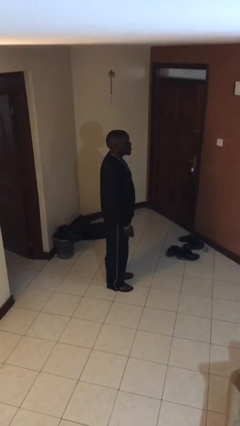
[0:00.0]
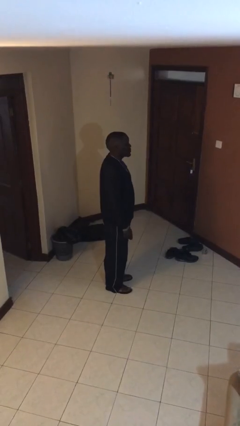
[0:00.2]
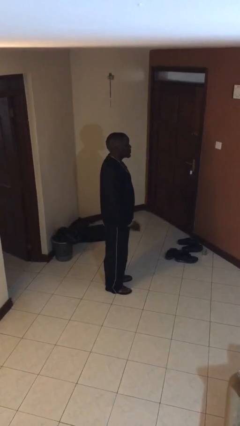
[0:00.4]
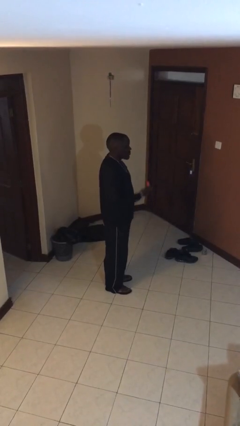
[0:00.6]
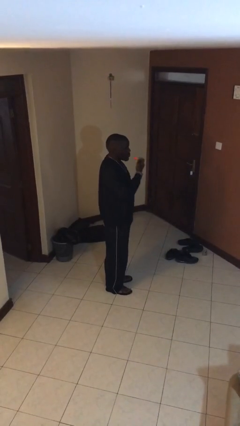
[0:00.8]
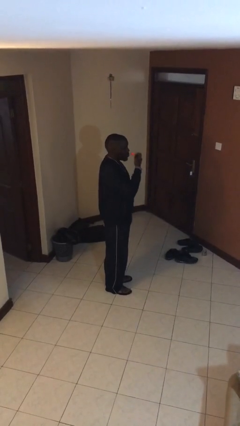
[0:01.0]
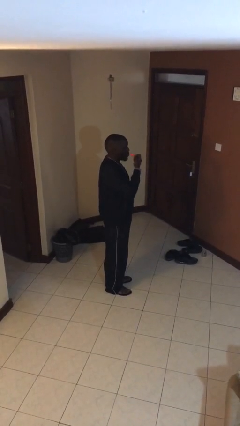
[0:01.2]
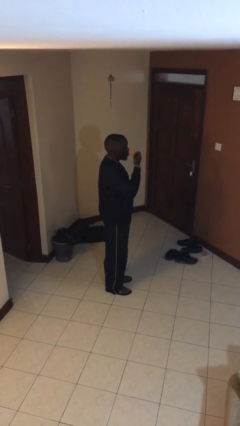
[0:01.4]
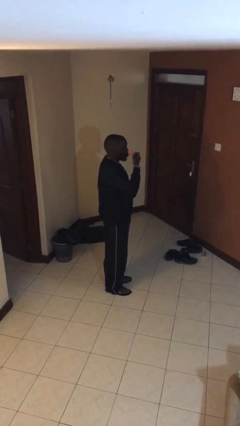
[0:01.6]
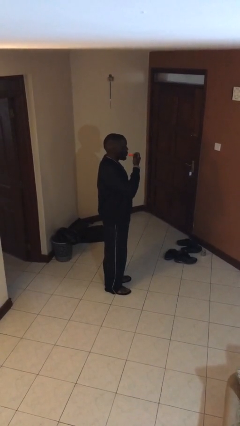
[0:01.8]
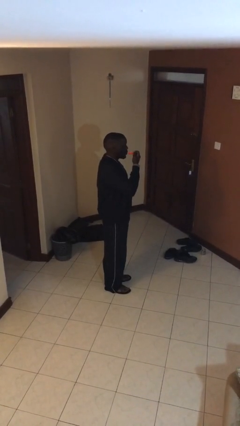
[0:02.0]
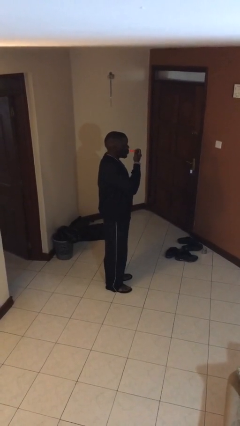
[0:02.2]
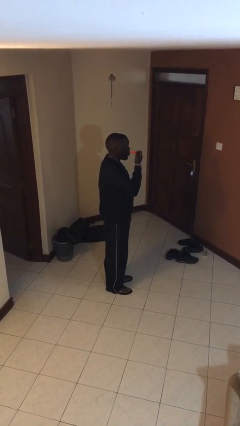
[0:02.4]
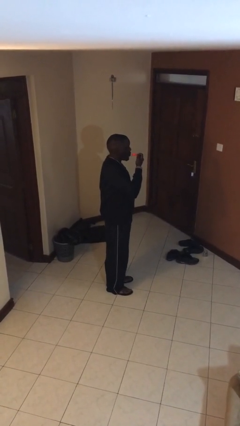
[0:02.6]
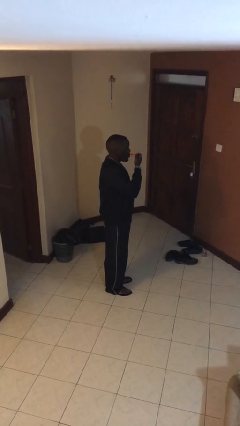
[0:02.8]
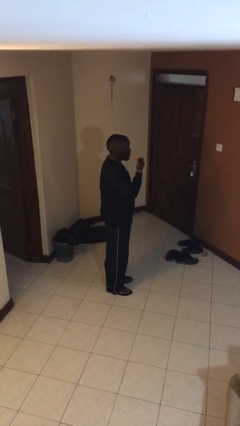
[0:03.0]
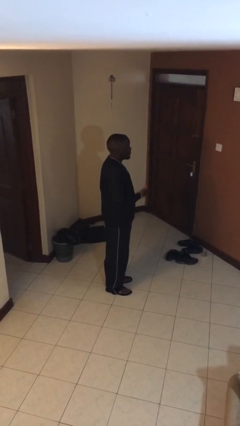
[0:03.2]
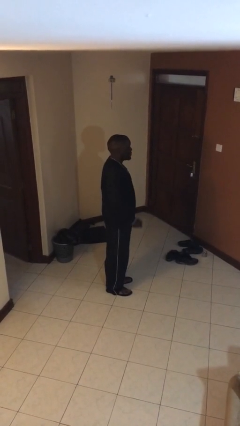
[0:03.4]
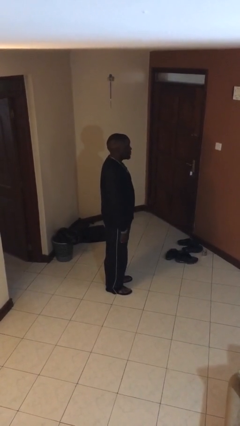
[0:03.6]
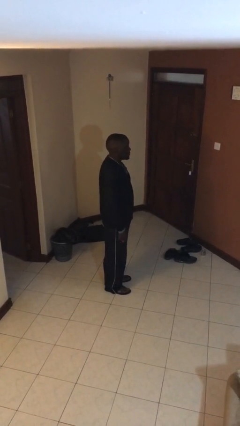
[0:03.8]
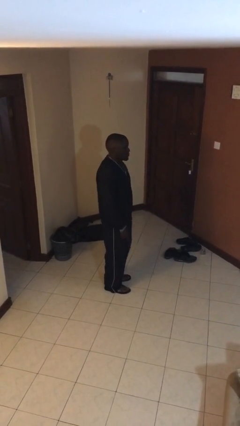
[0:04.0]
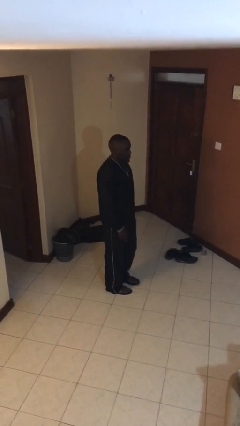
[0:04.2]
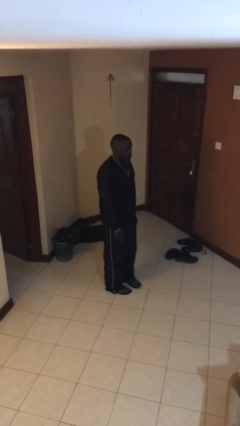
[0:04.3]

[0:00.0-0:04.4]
person applies lip makeup

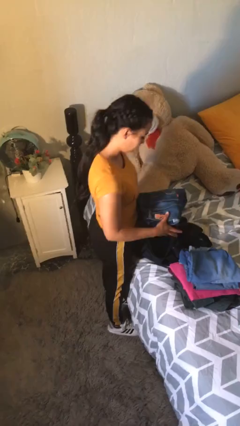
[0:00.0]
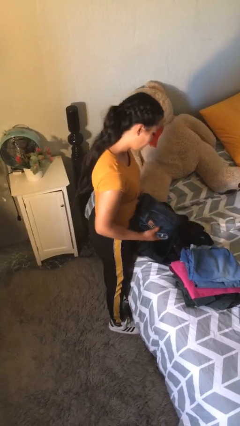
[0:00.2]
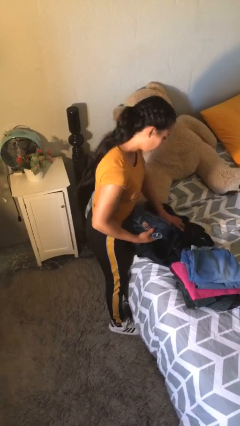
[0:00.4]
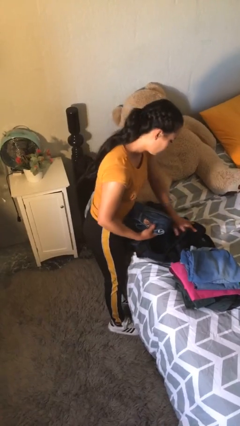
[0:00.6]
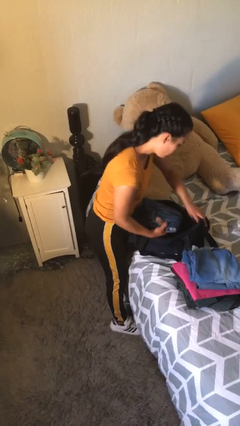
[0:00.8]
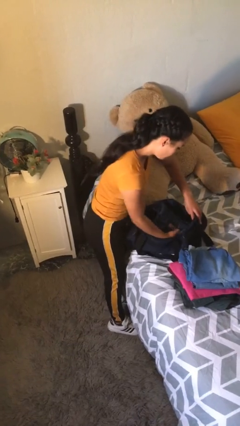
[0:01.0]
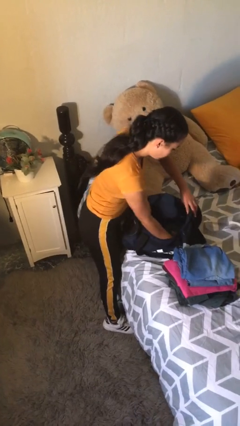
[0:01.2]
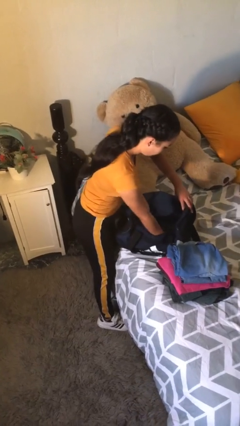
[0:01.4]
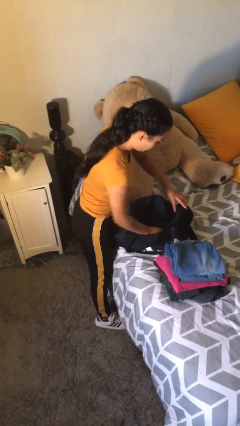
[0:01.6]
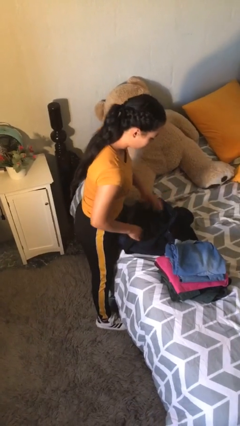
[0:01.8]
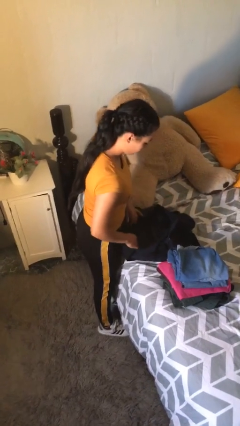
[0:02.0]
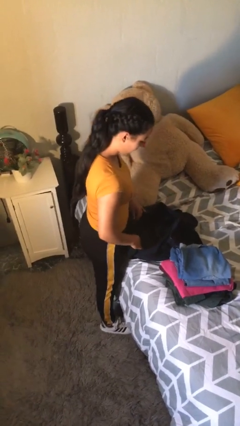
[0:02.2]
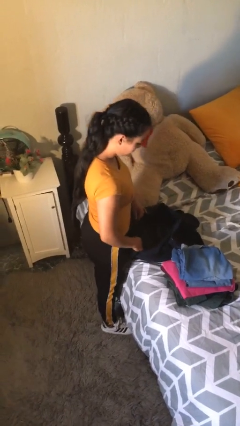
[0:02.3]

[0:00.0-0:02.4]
person loads clothes into suitcase

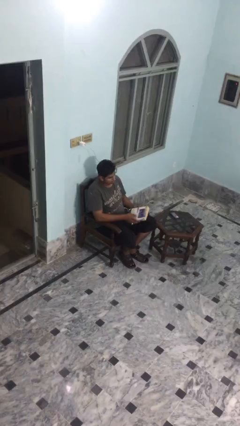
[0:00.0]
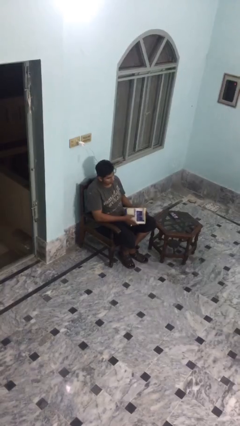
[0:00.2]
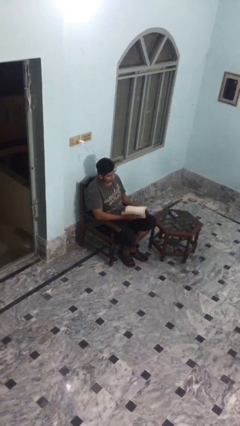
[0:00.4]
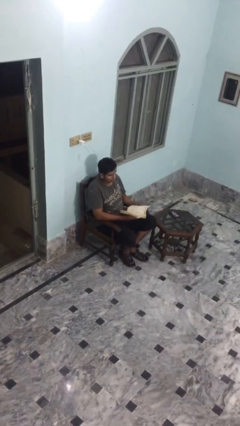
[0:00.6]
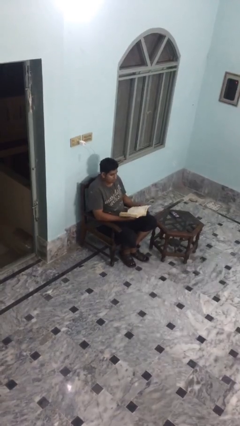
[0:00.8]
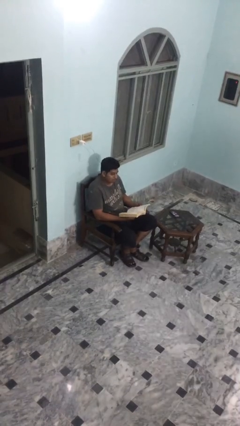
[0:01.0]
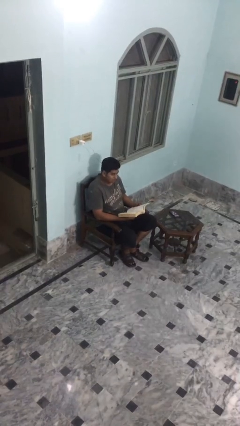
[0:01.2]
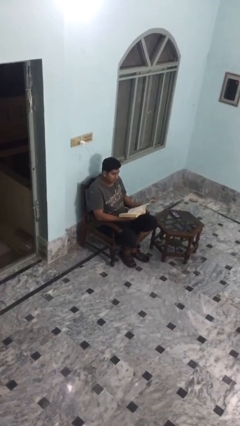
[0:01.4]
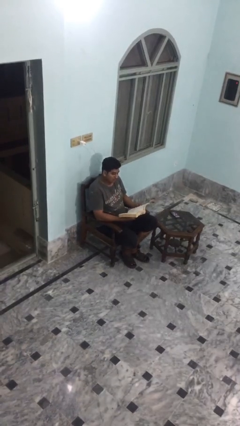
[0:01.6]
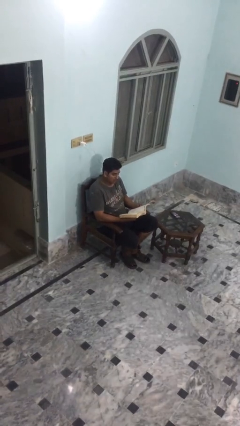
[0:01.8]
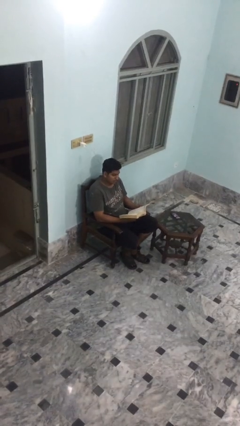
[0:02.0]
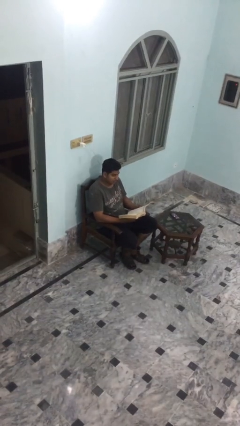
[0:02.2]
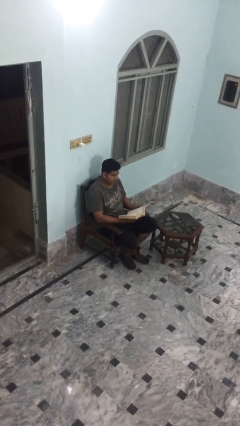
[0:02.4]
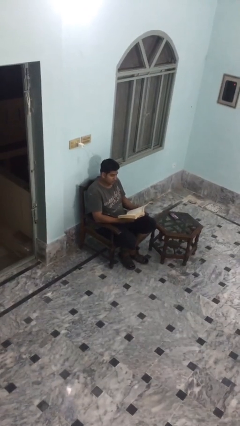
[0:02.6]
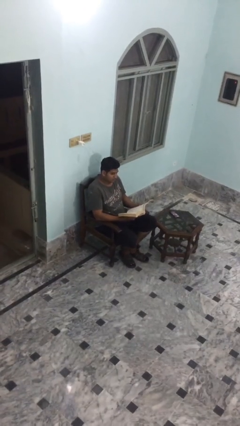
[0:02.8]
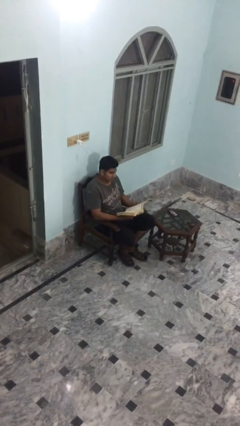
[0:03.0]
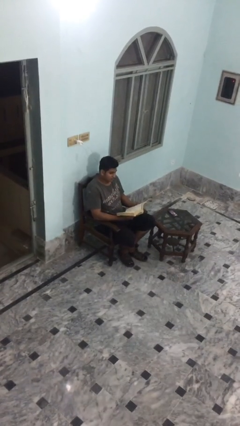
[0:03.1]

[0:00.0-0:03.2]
person reads document

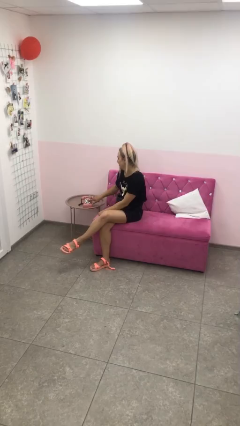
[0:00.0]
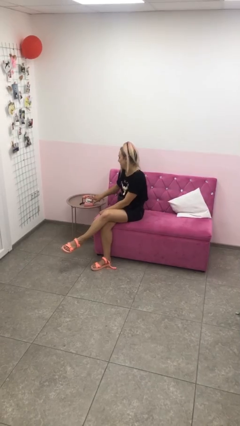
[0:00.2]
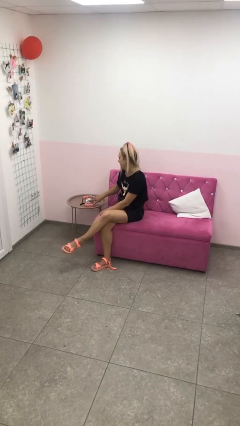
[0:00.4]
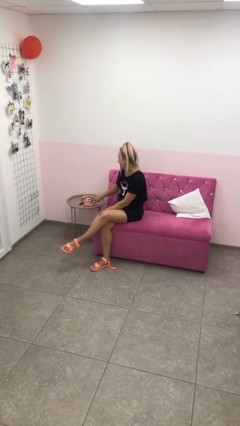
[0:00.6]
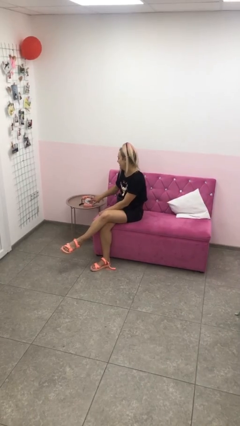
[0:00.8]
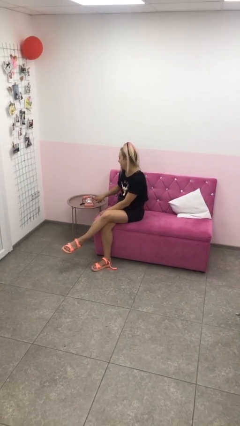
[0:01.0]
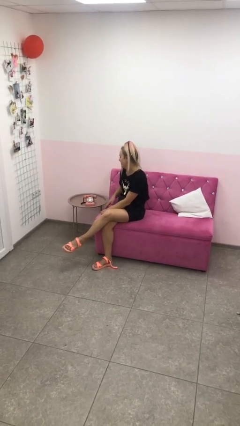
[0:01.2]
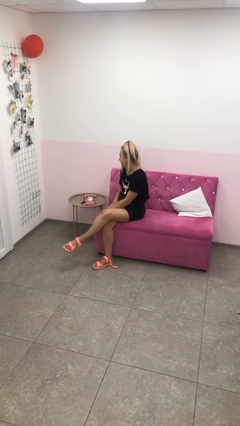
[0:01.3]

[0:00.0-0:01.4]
person taps object with finger

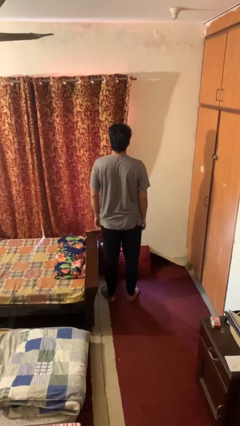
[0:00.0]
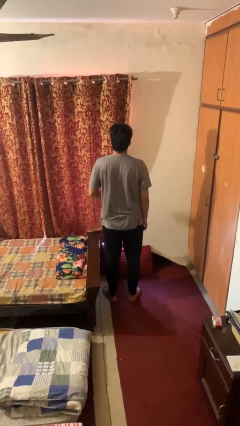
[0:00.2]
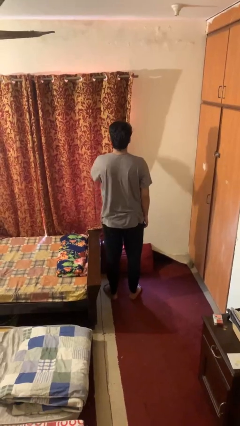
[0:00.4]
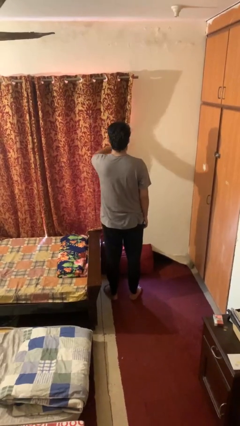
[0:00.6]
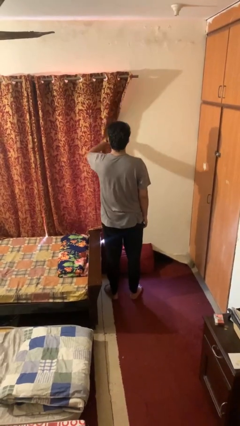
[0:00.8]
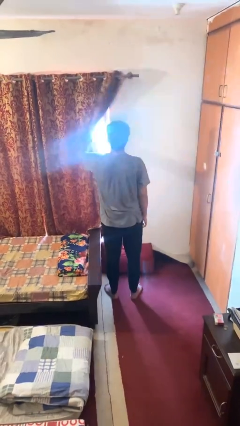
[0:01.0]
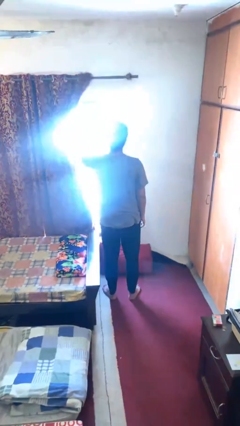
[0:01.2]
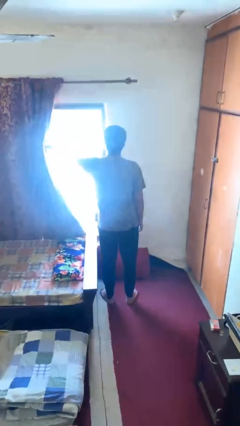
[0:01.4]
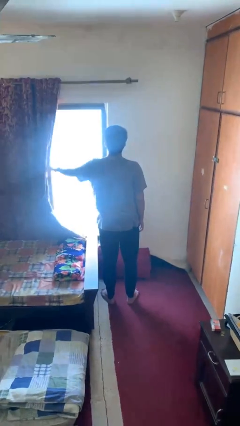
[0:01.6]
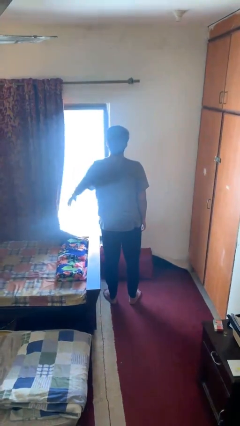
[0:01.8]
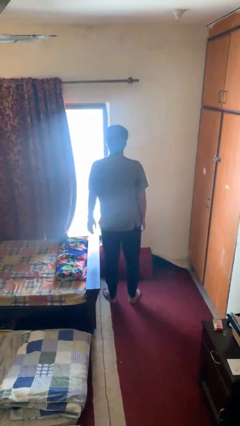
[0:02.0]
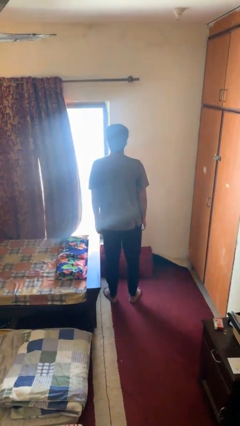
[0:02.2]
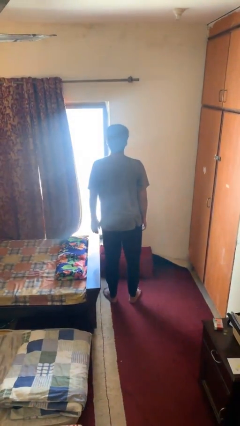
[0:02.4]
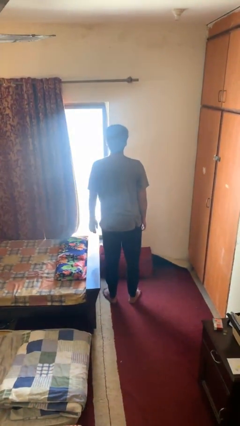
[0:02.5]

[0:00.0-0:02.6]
person opens curtains

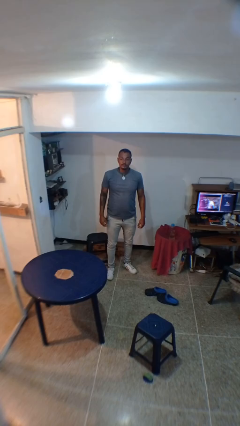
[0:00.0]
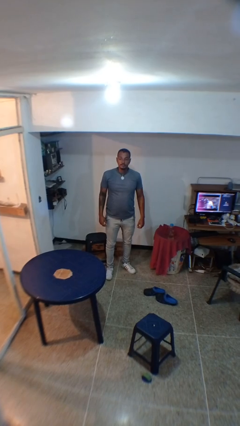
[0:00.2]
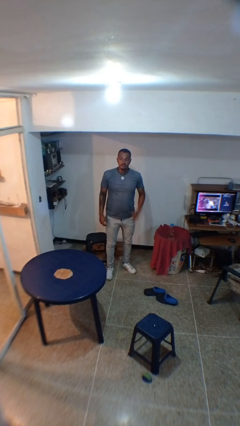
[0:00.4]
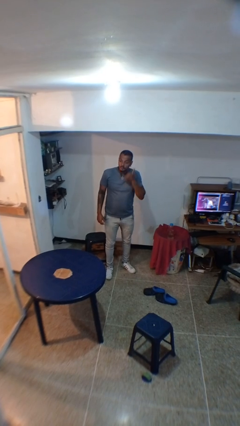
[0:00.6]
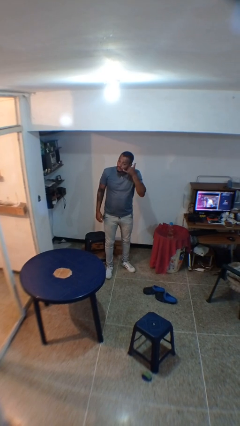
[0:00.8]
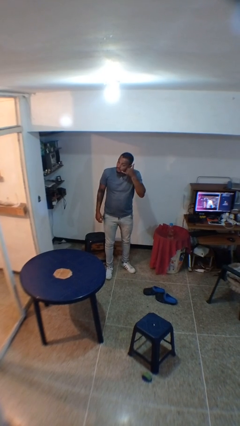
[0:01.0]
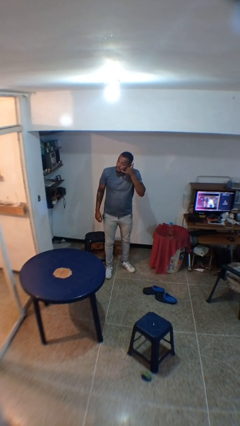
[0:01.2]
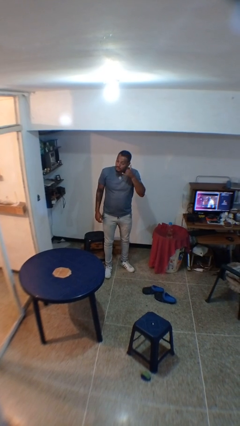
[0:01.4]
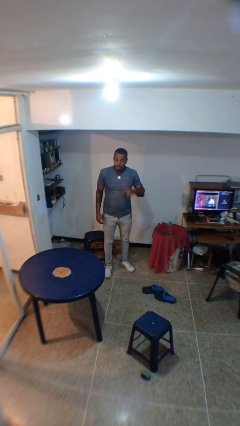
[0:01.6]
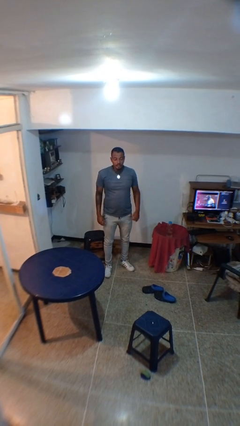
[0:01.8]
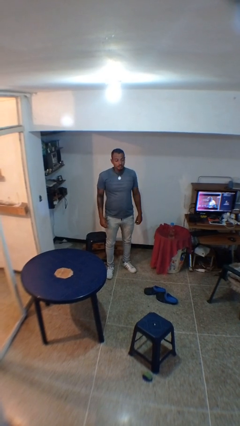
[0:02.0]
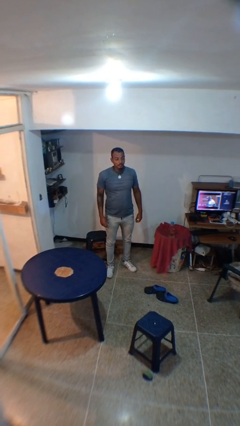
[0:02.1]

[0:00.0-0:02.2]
person gestures call me

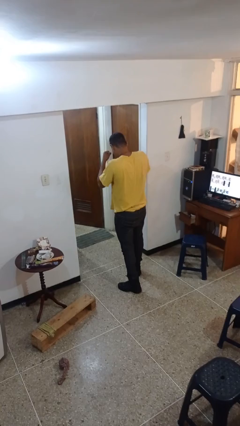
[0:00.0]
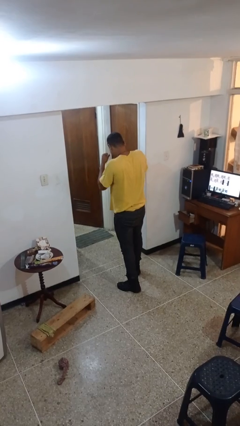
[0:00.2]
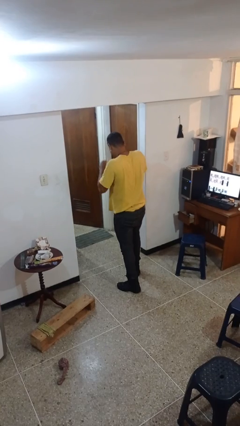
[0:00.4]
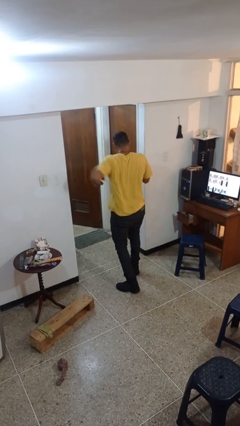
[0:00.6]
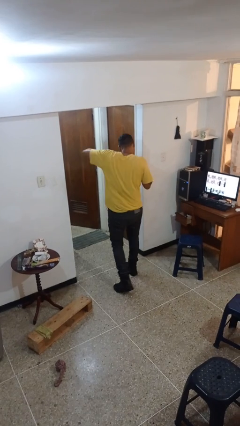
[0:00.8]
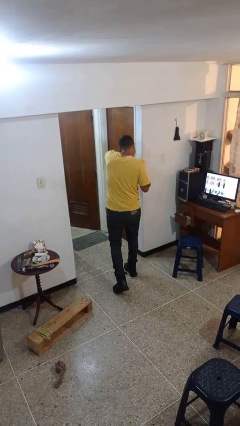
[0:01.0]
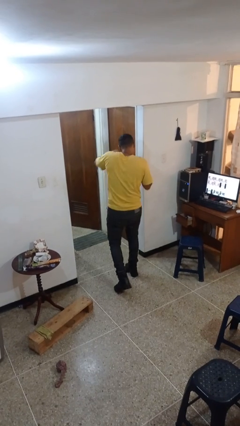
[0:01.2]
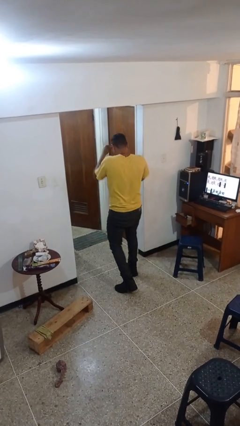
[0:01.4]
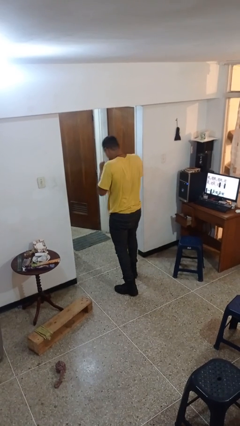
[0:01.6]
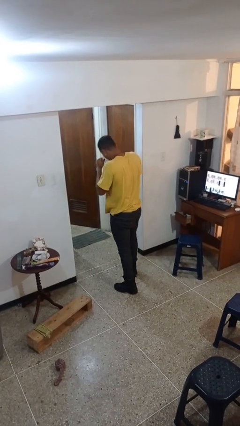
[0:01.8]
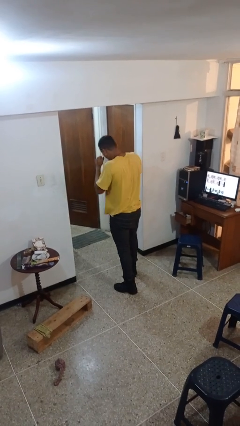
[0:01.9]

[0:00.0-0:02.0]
person punches
